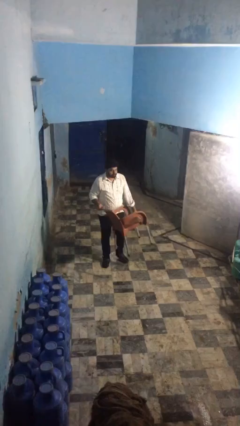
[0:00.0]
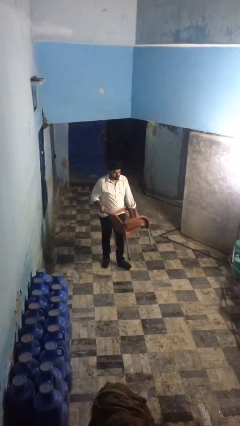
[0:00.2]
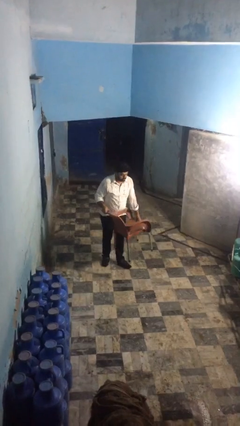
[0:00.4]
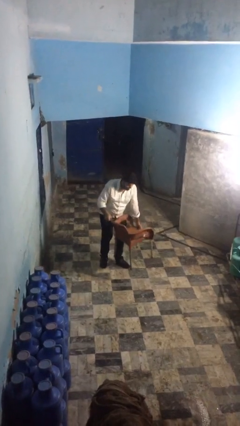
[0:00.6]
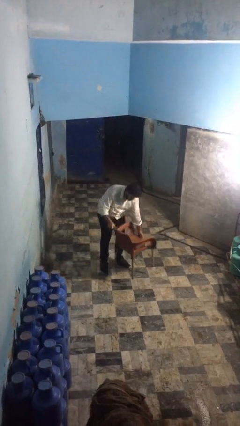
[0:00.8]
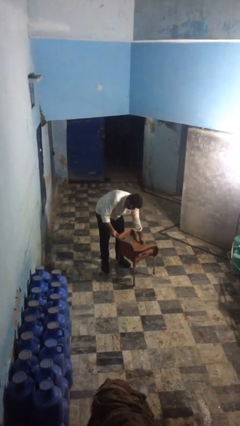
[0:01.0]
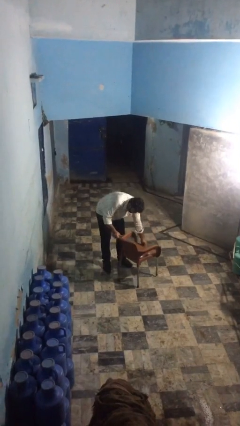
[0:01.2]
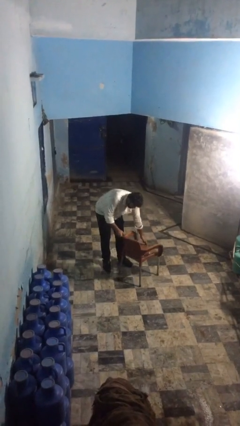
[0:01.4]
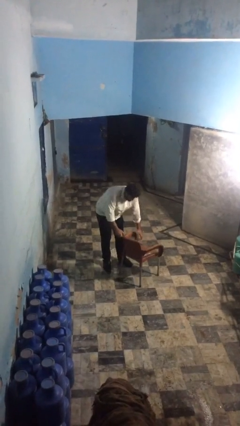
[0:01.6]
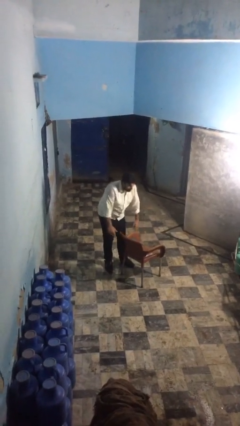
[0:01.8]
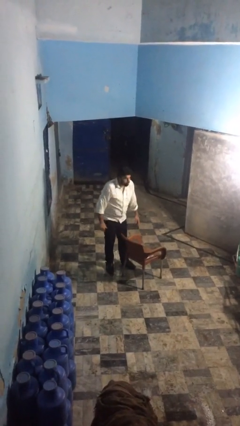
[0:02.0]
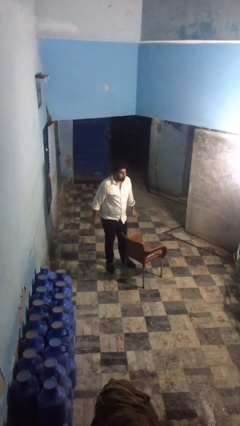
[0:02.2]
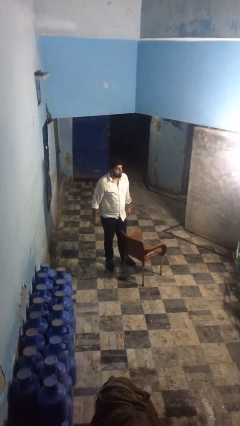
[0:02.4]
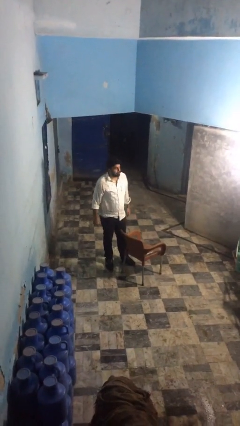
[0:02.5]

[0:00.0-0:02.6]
person puts down object on floor

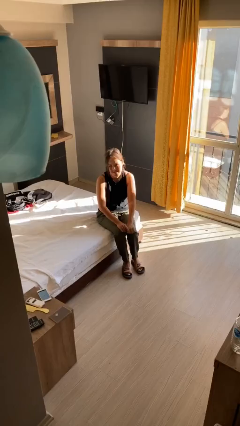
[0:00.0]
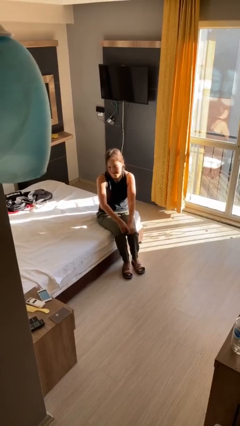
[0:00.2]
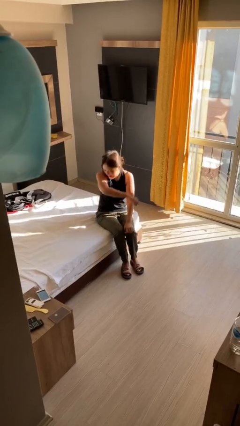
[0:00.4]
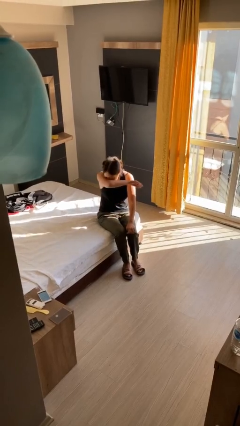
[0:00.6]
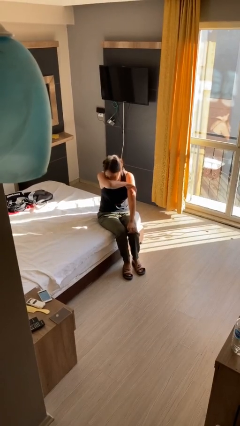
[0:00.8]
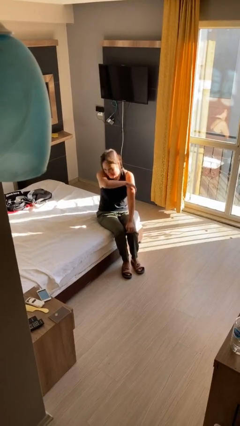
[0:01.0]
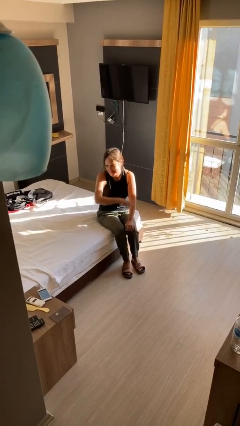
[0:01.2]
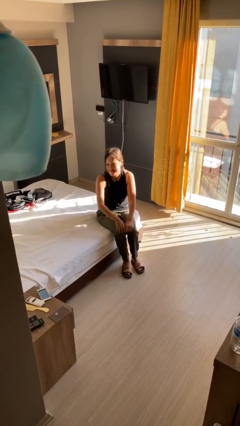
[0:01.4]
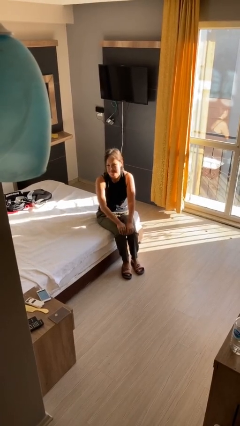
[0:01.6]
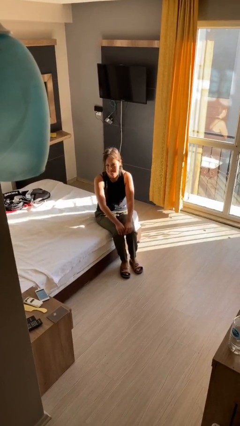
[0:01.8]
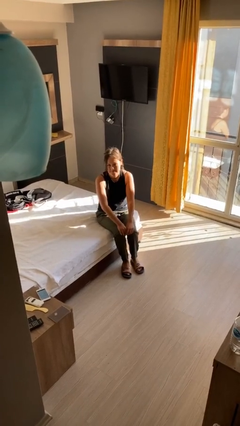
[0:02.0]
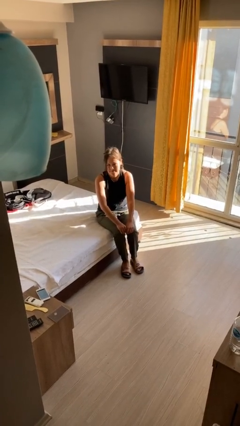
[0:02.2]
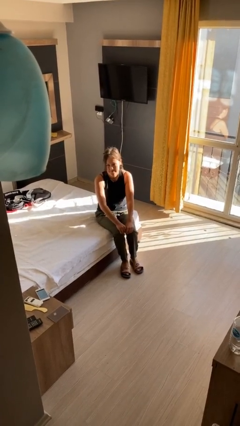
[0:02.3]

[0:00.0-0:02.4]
person sneezes into hand

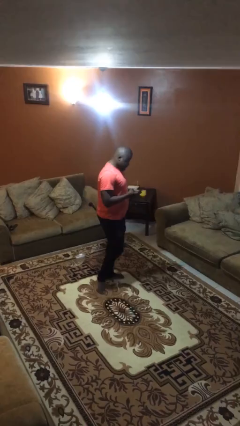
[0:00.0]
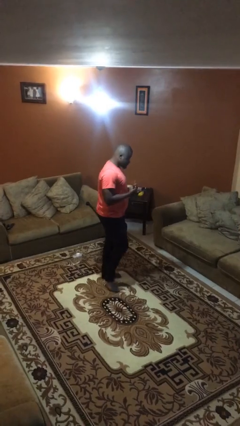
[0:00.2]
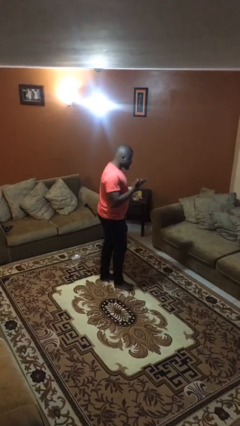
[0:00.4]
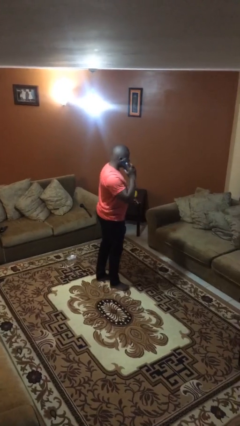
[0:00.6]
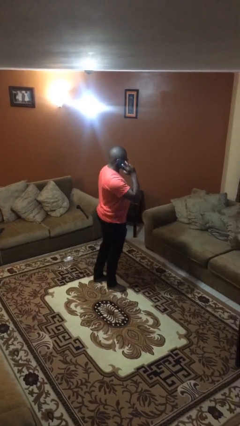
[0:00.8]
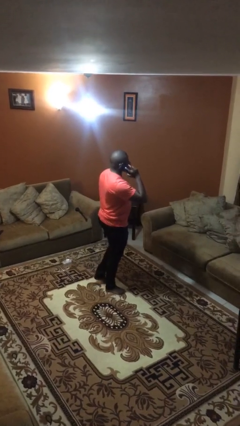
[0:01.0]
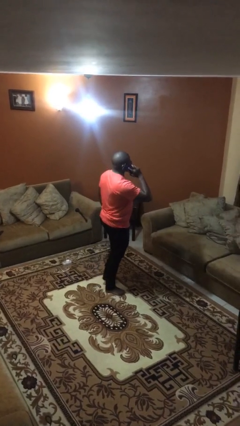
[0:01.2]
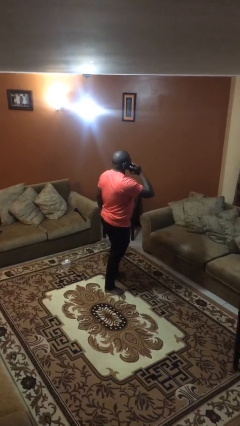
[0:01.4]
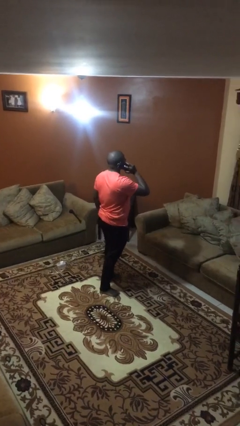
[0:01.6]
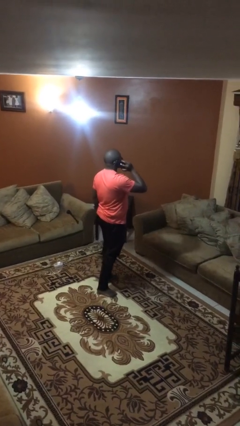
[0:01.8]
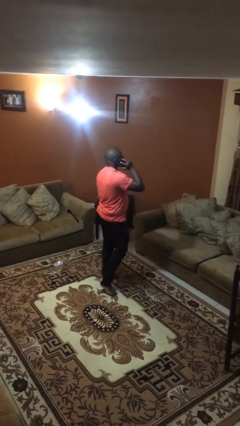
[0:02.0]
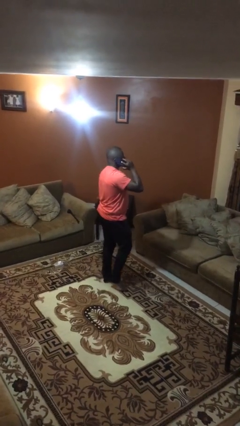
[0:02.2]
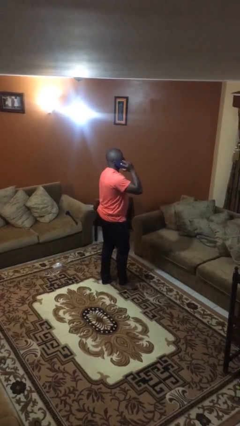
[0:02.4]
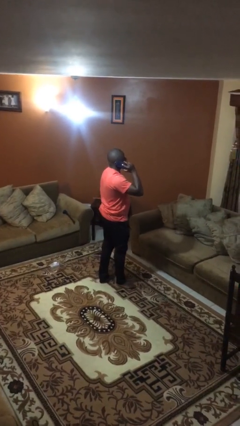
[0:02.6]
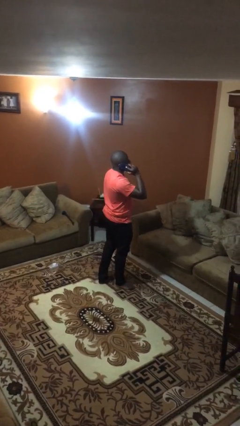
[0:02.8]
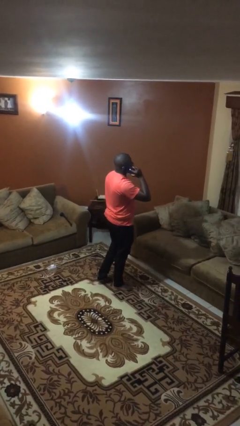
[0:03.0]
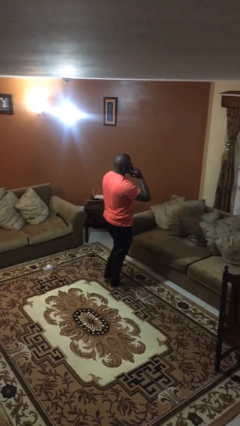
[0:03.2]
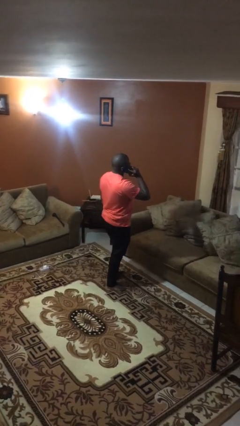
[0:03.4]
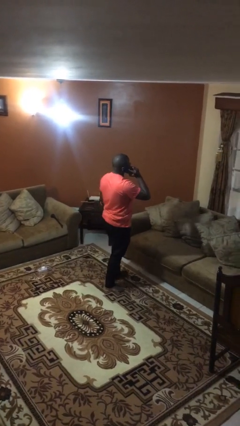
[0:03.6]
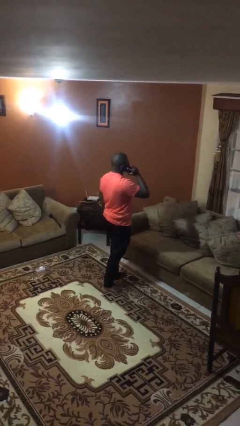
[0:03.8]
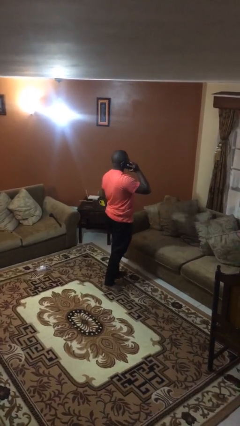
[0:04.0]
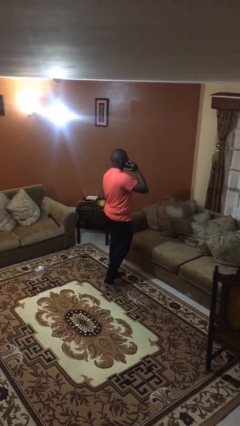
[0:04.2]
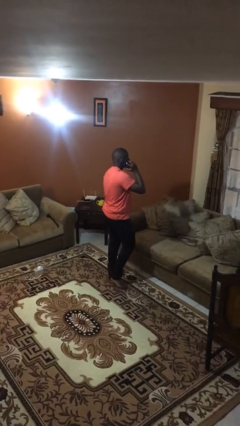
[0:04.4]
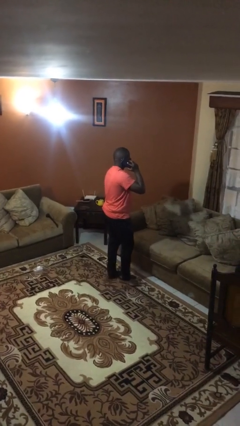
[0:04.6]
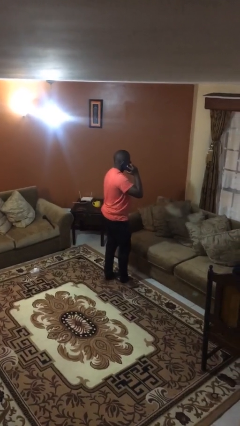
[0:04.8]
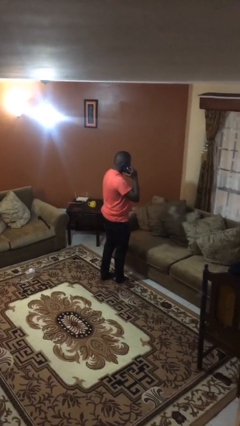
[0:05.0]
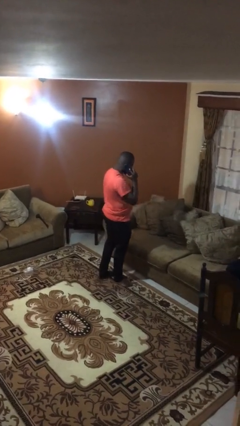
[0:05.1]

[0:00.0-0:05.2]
person talks on phone

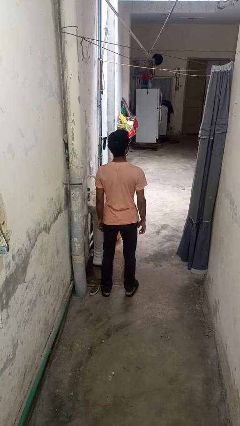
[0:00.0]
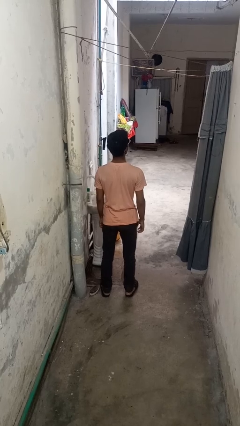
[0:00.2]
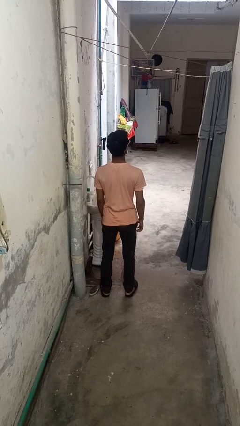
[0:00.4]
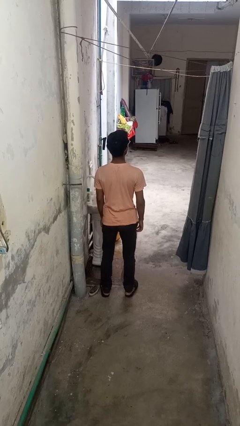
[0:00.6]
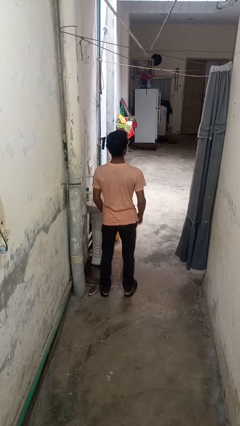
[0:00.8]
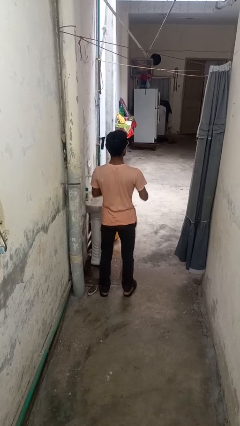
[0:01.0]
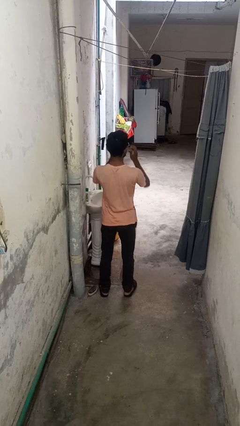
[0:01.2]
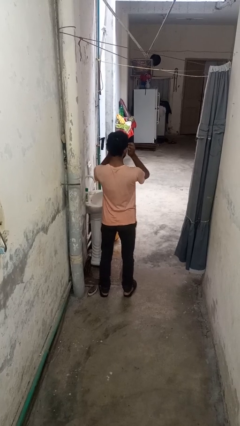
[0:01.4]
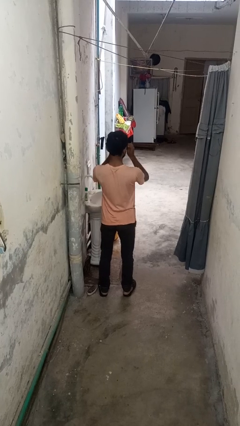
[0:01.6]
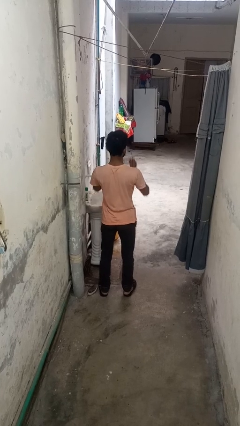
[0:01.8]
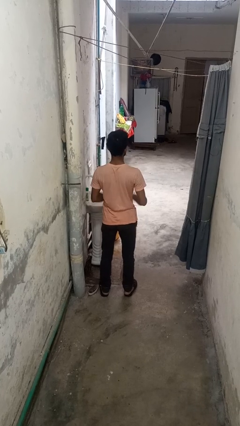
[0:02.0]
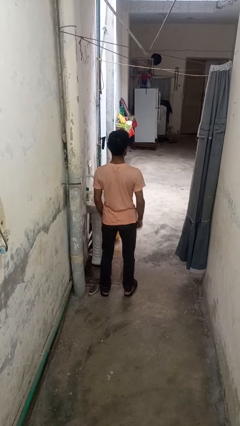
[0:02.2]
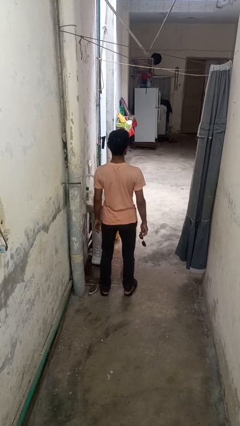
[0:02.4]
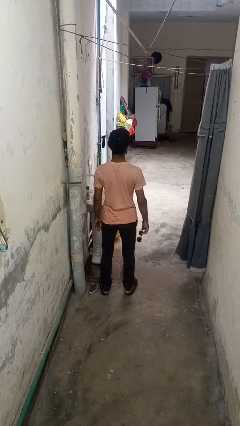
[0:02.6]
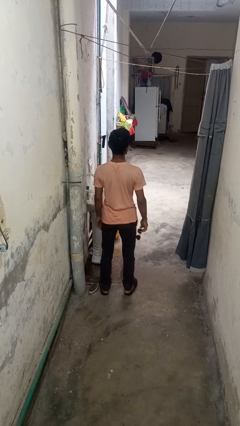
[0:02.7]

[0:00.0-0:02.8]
person takes off sunglasses

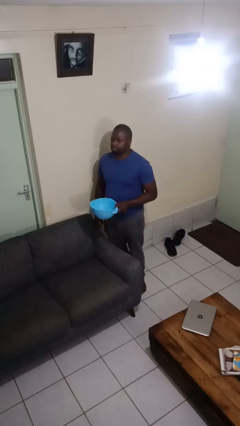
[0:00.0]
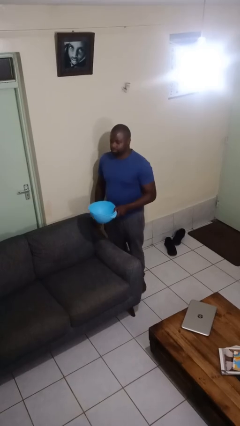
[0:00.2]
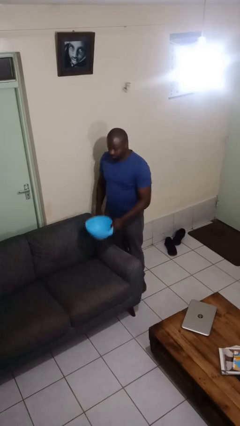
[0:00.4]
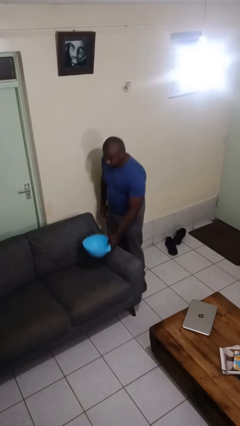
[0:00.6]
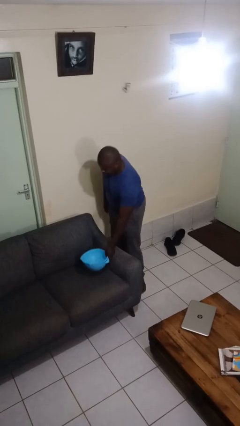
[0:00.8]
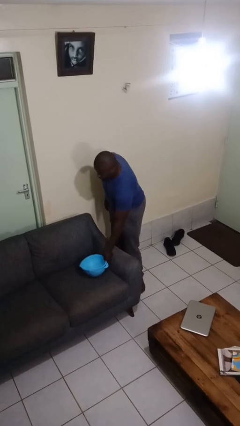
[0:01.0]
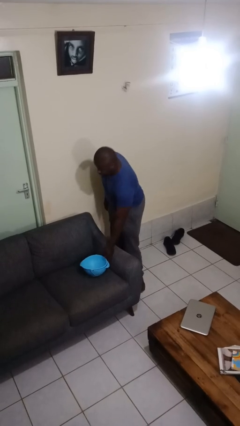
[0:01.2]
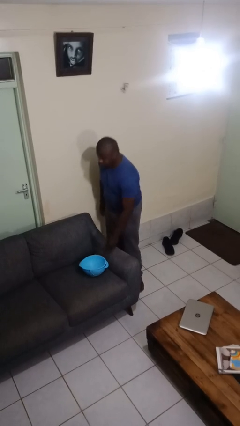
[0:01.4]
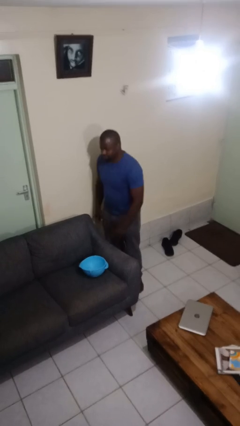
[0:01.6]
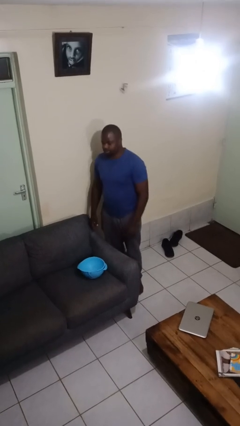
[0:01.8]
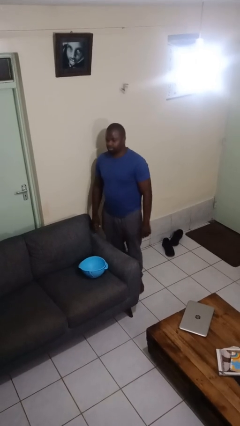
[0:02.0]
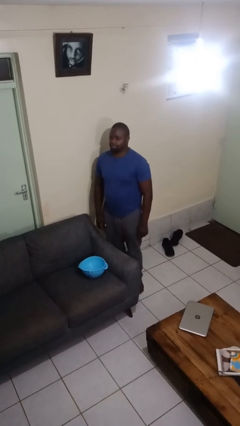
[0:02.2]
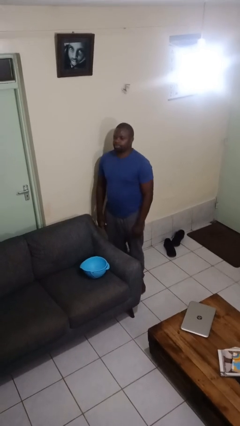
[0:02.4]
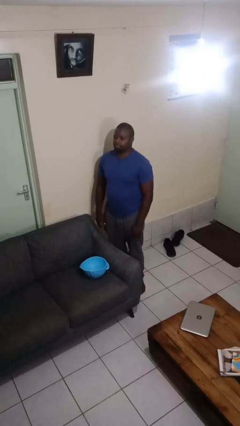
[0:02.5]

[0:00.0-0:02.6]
person puts down object on couch

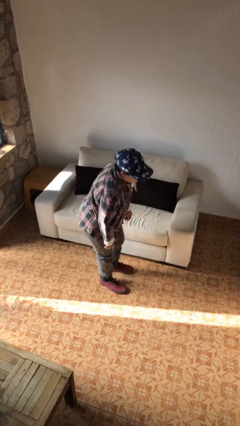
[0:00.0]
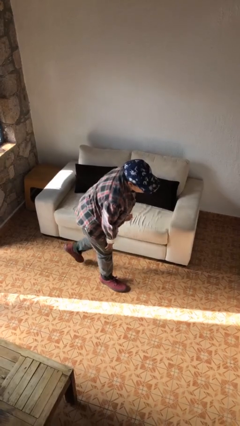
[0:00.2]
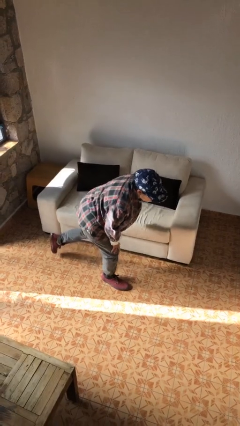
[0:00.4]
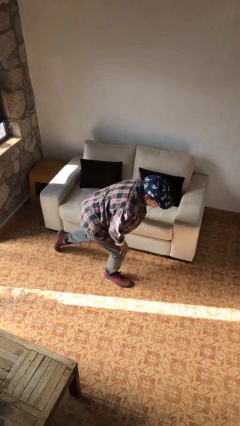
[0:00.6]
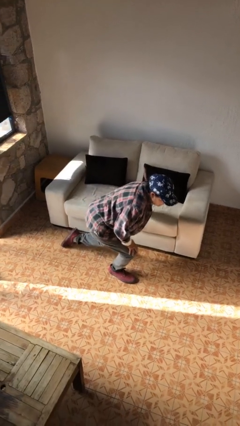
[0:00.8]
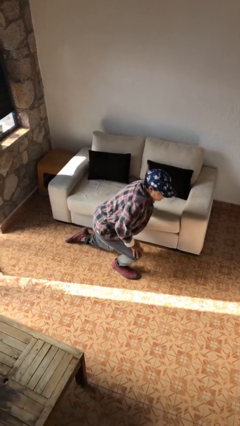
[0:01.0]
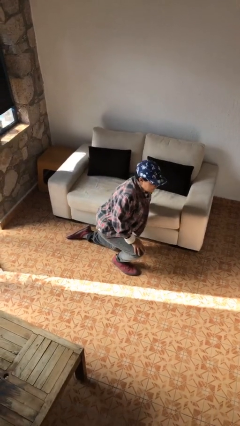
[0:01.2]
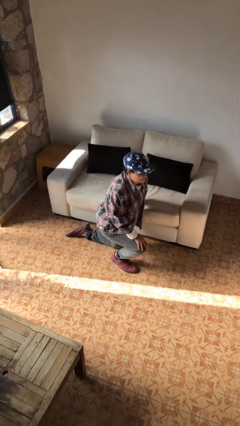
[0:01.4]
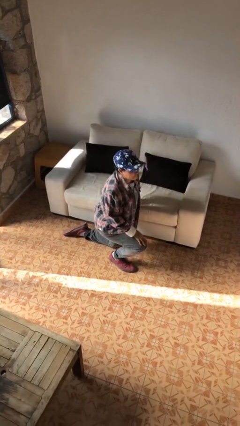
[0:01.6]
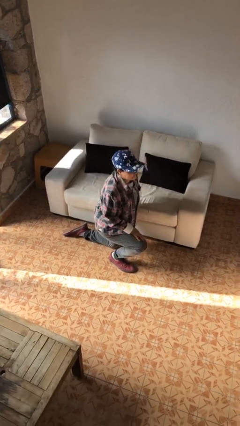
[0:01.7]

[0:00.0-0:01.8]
person kneels
